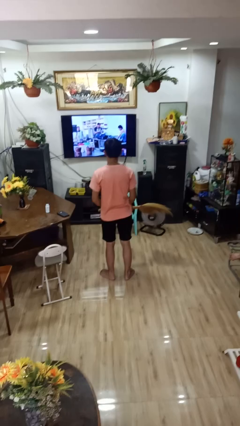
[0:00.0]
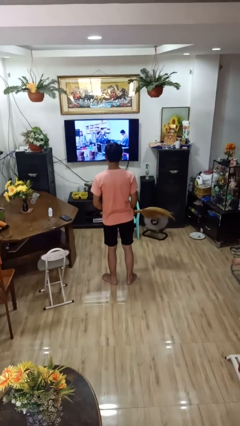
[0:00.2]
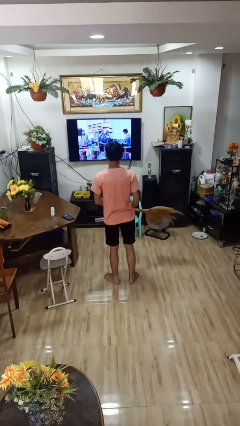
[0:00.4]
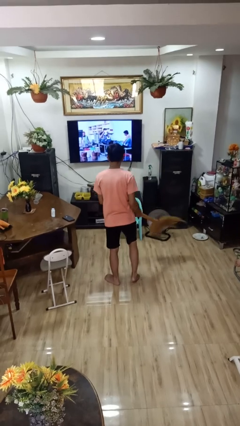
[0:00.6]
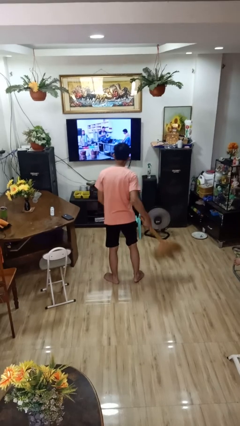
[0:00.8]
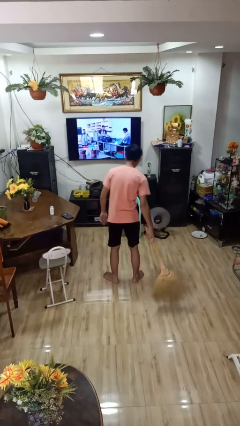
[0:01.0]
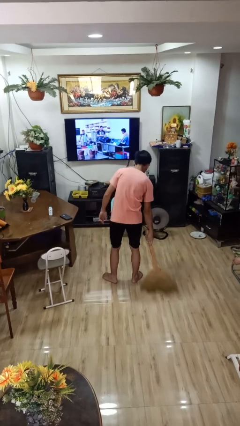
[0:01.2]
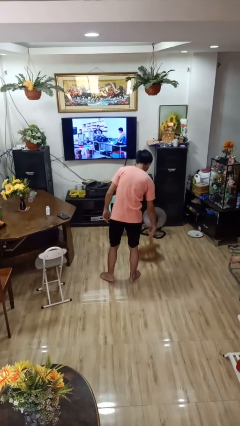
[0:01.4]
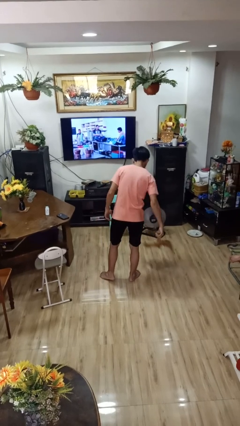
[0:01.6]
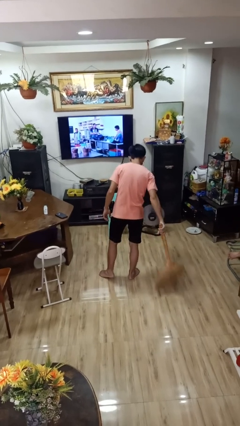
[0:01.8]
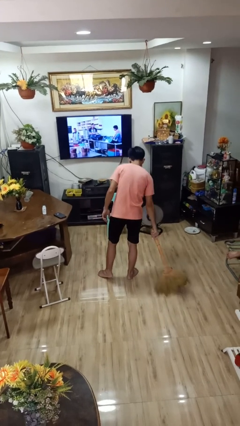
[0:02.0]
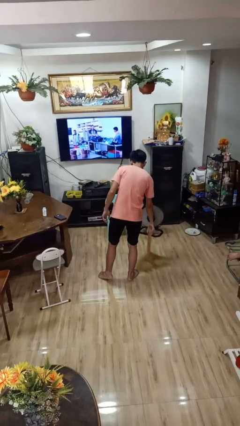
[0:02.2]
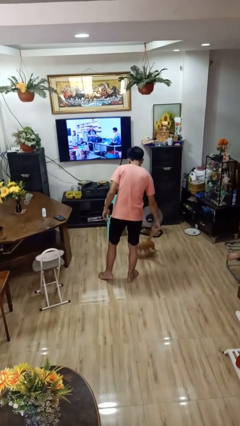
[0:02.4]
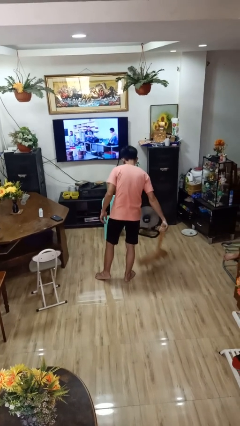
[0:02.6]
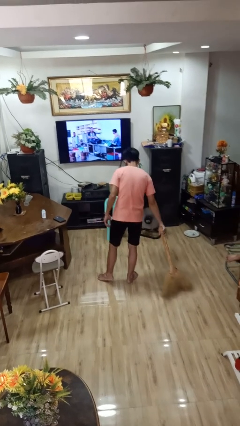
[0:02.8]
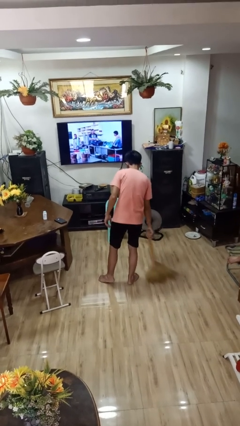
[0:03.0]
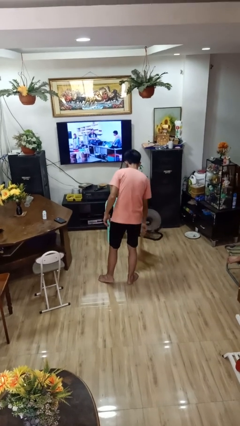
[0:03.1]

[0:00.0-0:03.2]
person sweeps floor

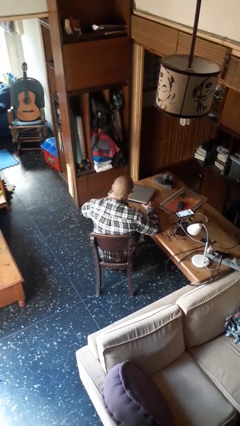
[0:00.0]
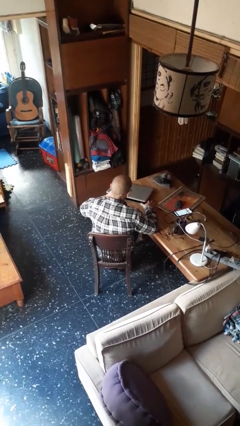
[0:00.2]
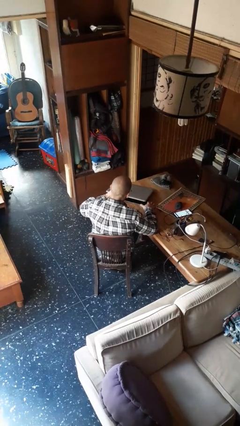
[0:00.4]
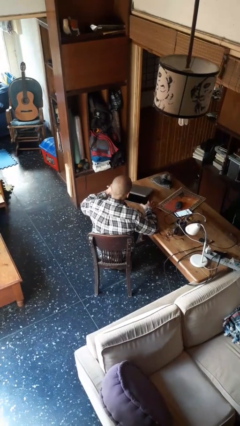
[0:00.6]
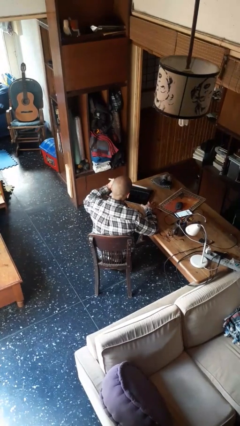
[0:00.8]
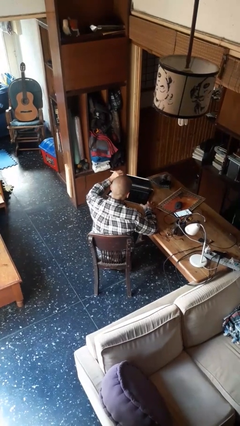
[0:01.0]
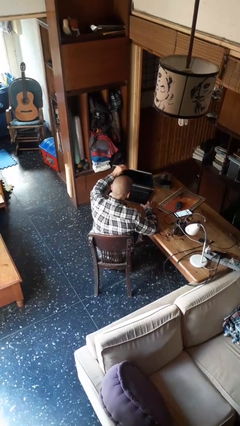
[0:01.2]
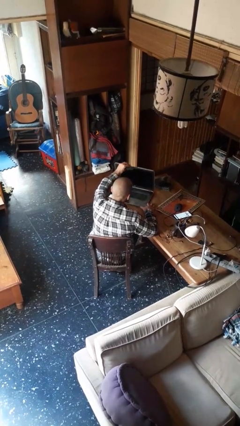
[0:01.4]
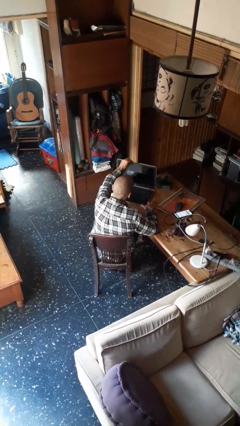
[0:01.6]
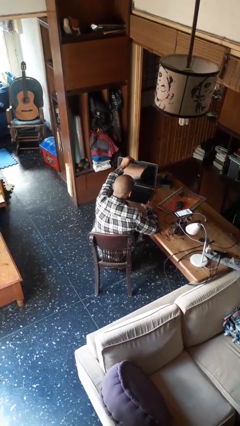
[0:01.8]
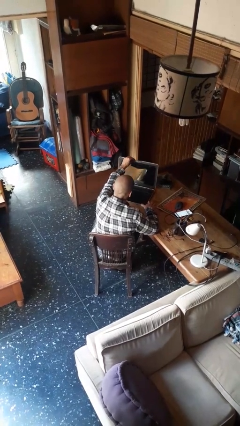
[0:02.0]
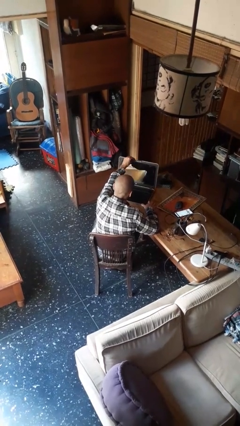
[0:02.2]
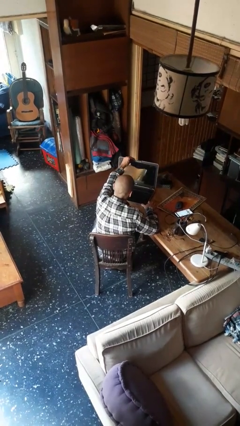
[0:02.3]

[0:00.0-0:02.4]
person opens laptop

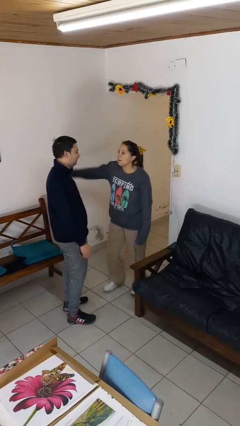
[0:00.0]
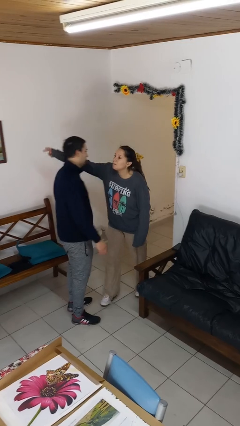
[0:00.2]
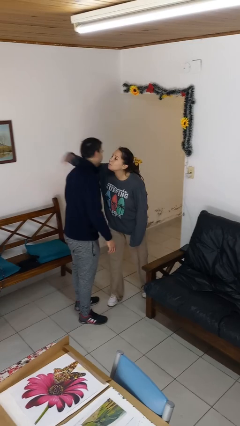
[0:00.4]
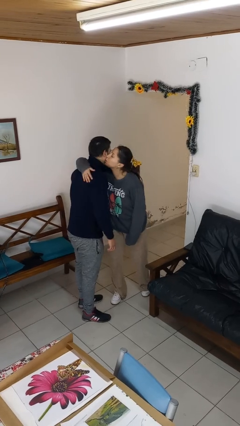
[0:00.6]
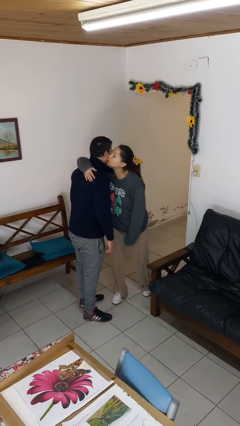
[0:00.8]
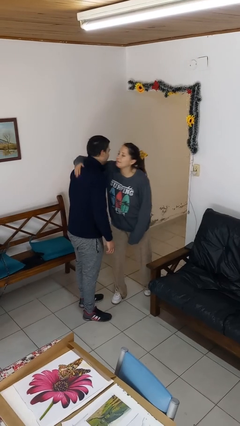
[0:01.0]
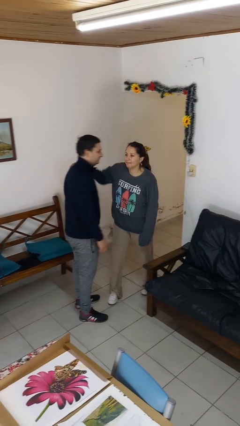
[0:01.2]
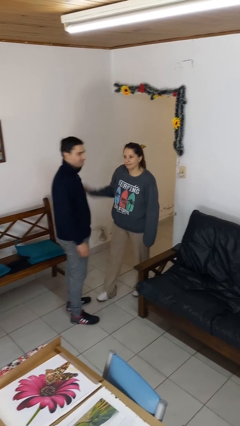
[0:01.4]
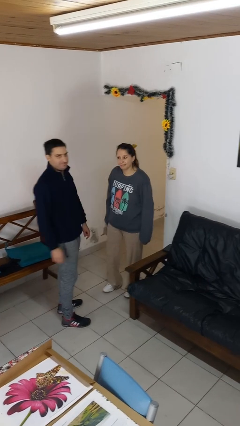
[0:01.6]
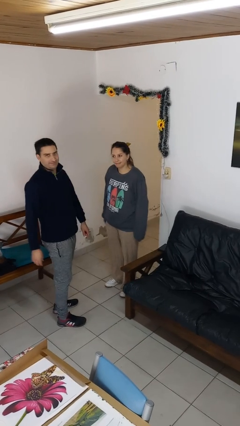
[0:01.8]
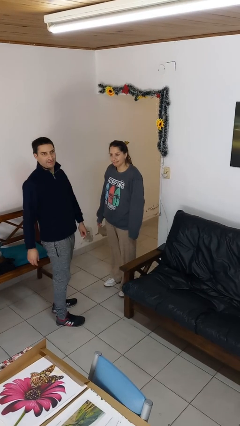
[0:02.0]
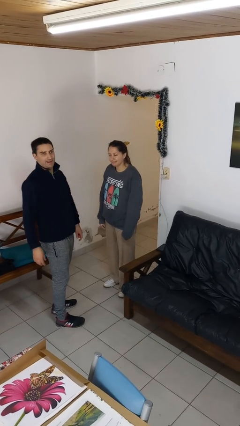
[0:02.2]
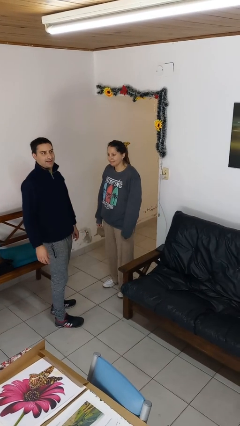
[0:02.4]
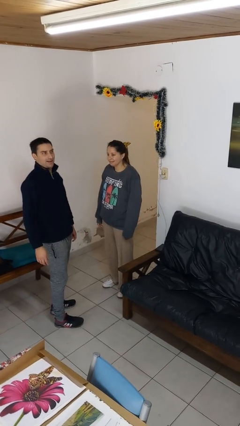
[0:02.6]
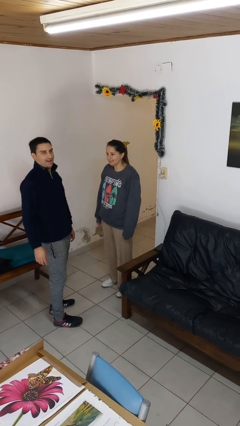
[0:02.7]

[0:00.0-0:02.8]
person kisses cheek of person

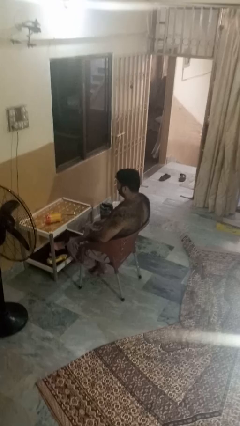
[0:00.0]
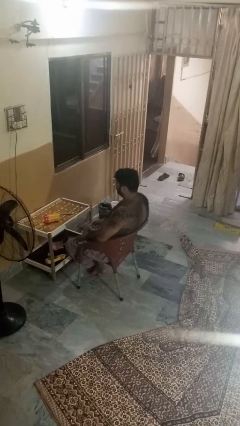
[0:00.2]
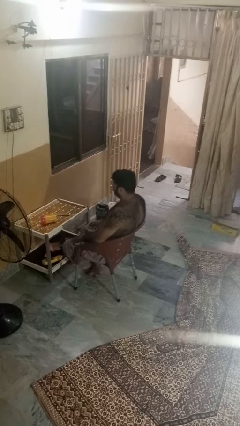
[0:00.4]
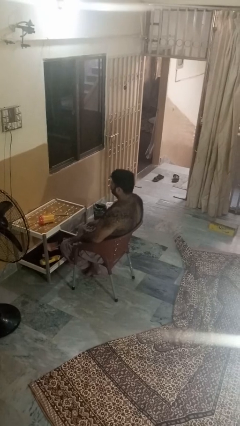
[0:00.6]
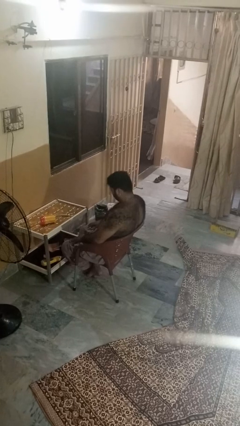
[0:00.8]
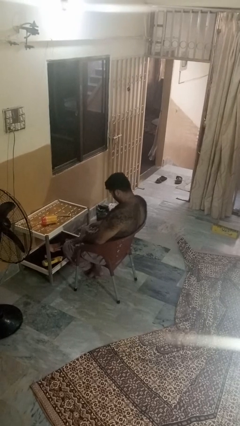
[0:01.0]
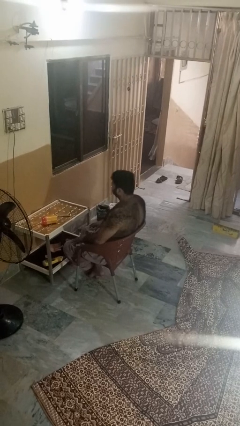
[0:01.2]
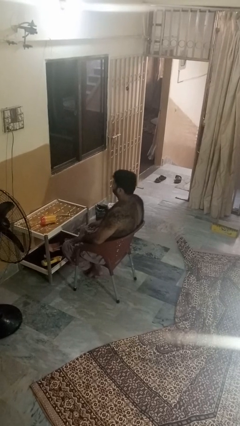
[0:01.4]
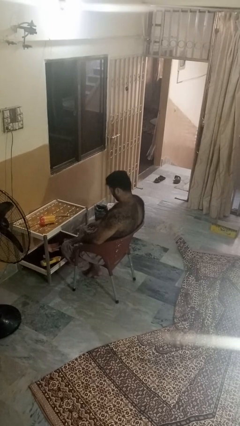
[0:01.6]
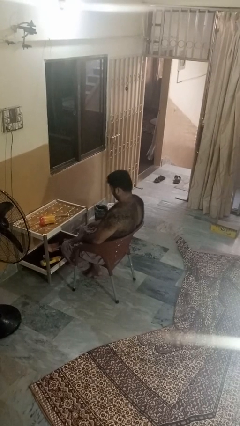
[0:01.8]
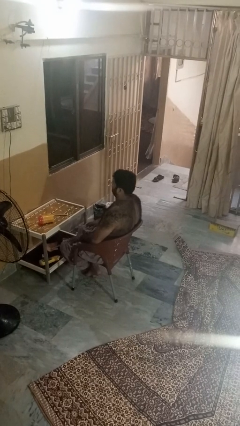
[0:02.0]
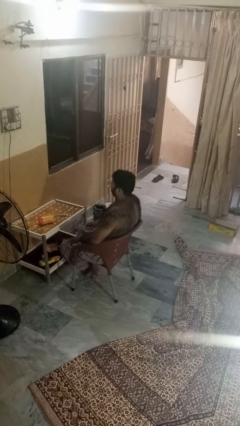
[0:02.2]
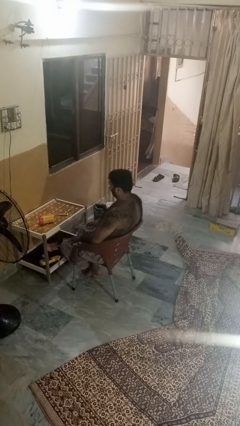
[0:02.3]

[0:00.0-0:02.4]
person nods head

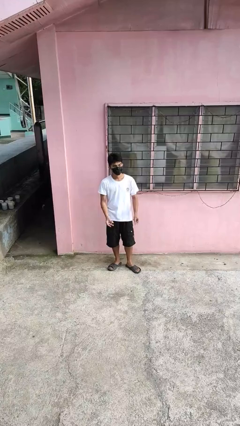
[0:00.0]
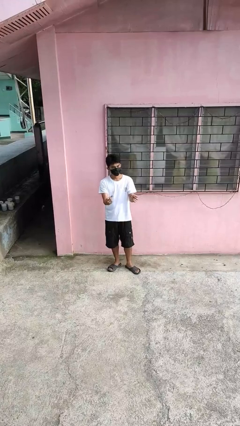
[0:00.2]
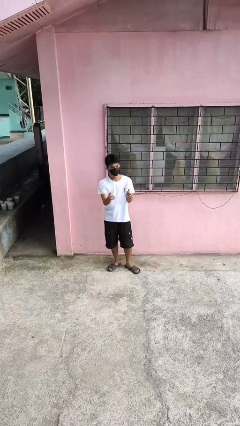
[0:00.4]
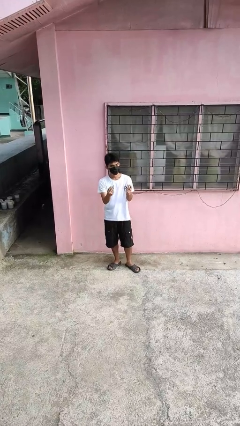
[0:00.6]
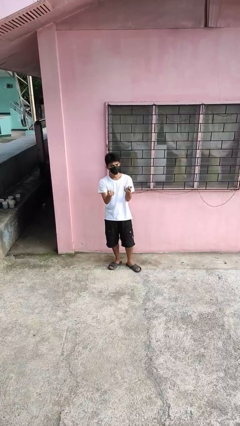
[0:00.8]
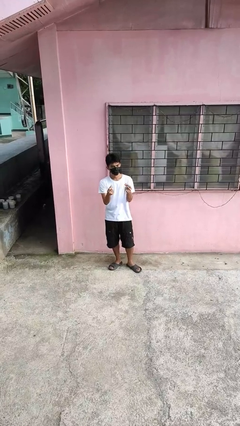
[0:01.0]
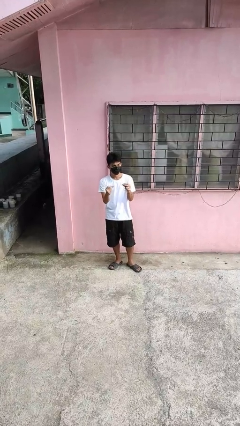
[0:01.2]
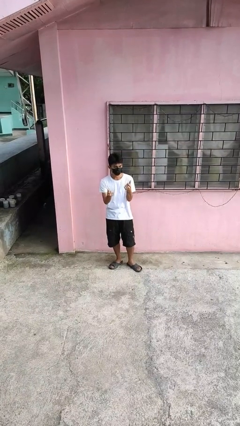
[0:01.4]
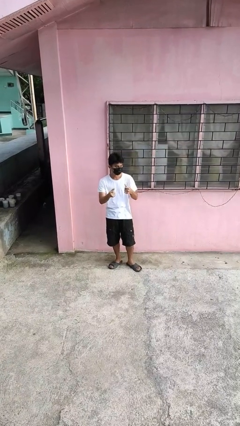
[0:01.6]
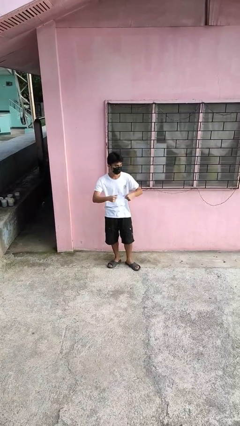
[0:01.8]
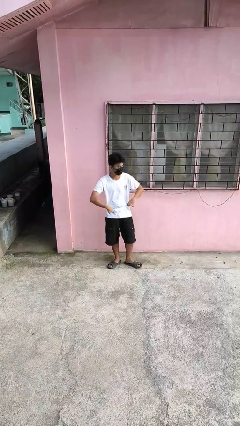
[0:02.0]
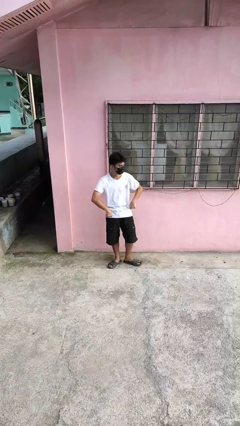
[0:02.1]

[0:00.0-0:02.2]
person snaps fingers

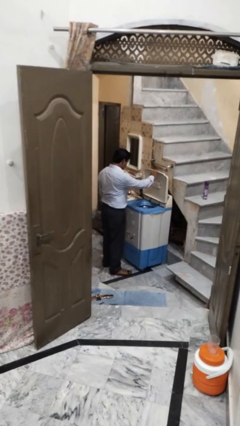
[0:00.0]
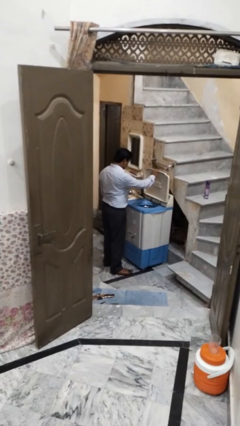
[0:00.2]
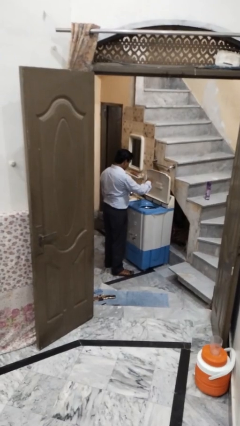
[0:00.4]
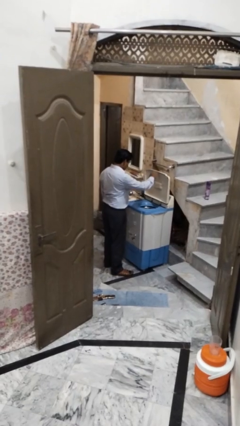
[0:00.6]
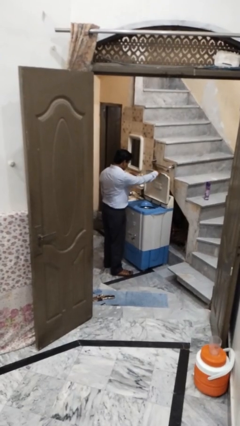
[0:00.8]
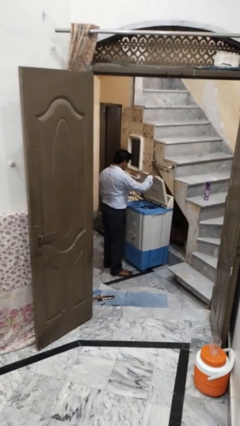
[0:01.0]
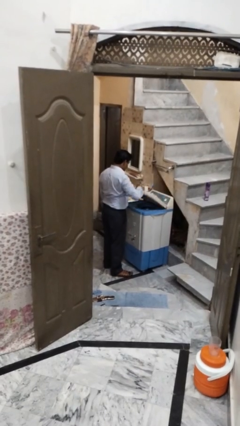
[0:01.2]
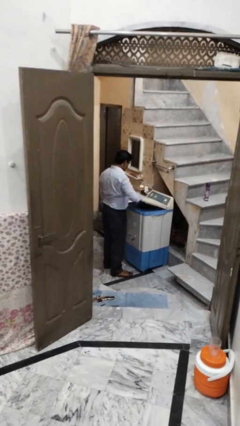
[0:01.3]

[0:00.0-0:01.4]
person closes clothes washer

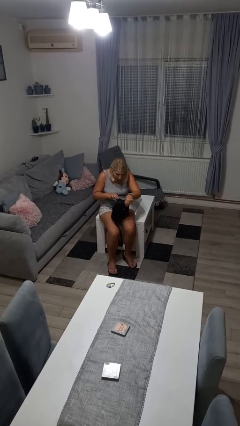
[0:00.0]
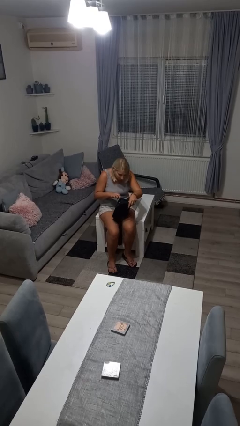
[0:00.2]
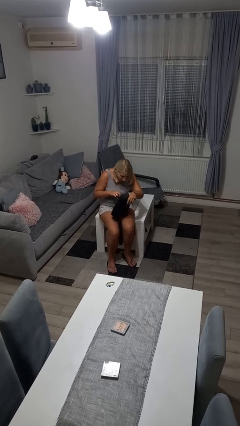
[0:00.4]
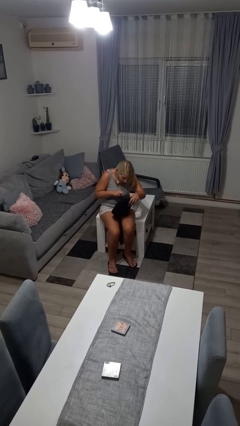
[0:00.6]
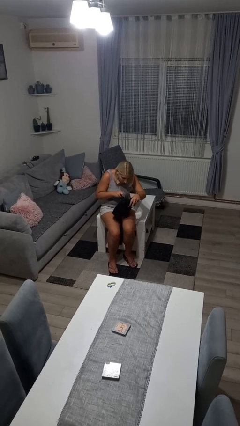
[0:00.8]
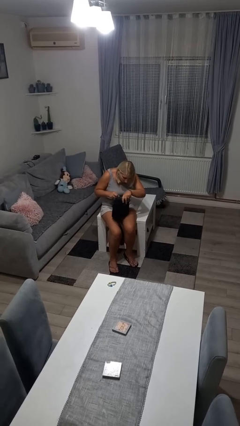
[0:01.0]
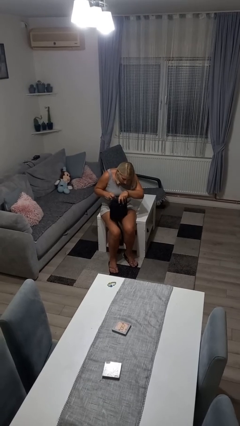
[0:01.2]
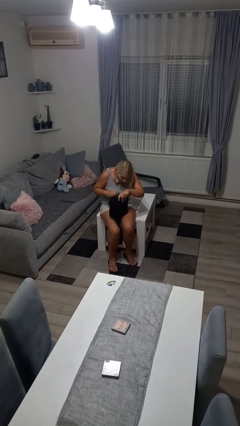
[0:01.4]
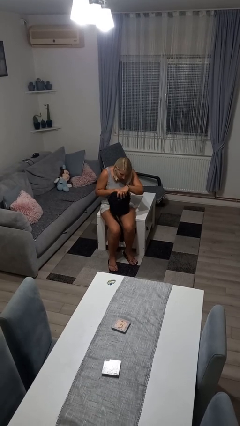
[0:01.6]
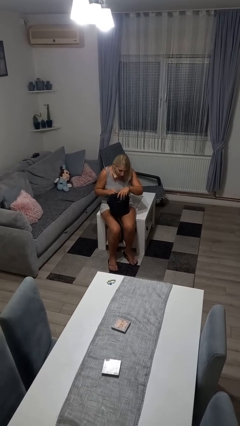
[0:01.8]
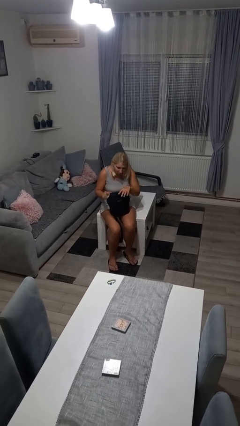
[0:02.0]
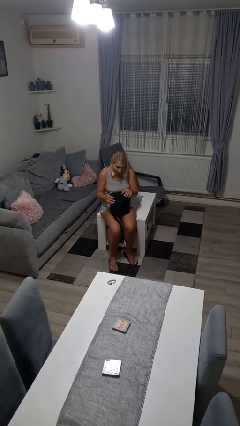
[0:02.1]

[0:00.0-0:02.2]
person searches in bag
